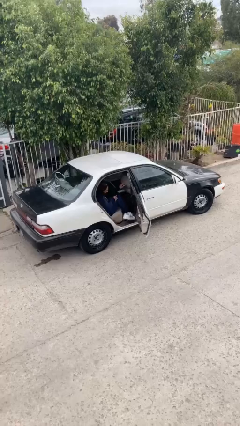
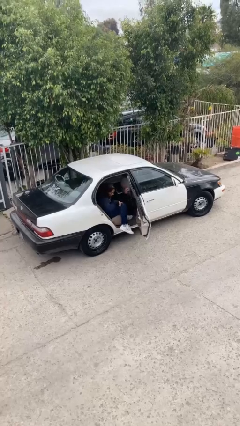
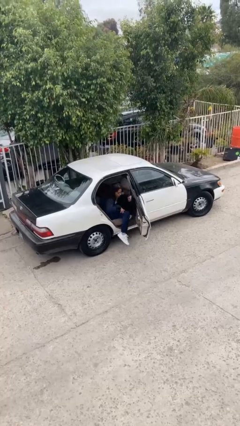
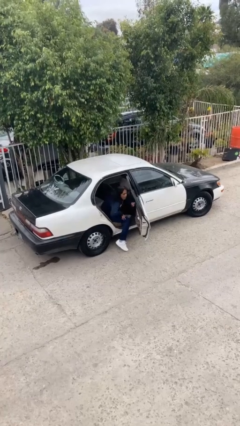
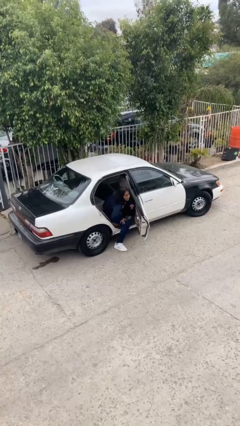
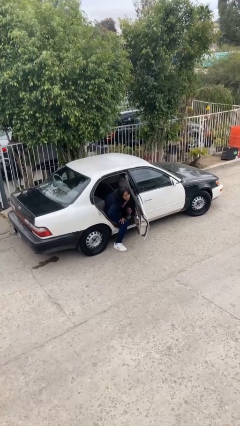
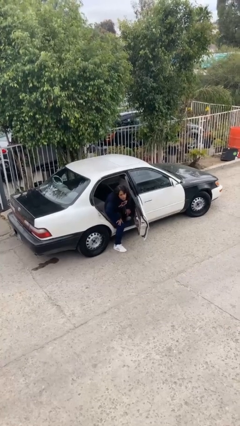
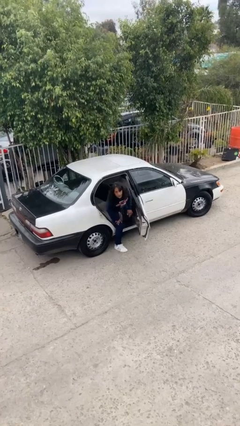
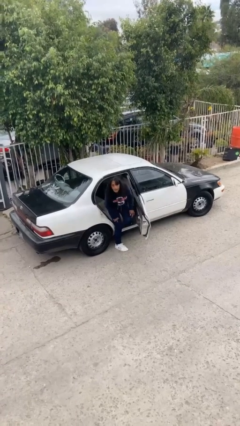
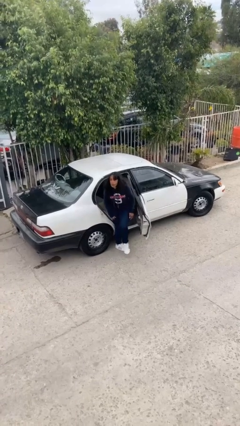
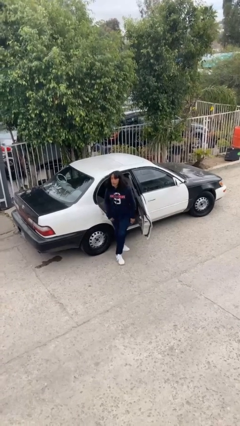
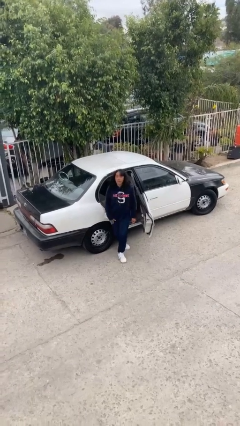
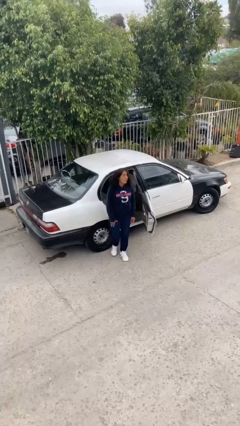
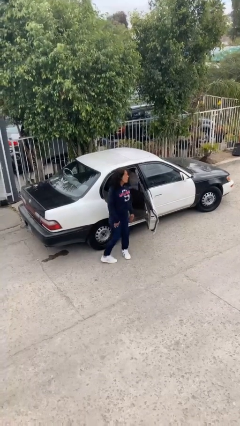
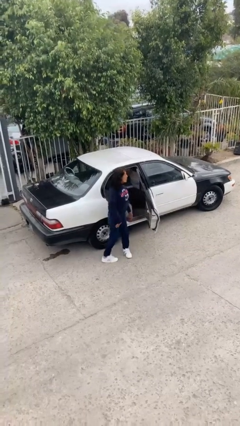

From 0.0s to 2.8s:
person exits car

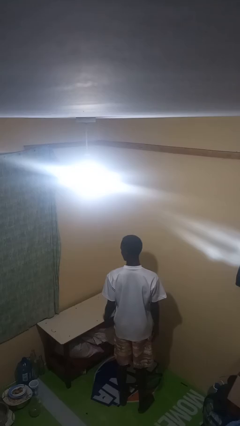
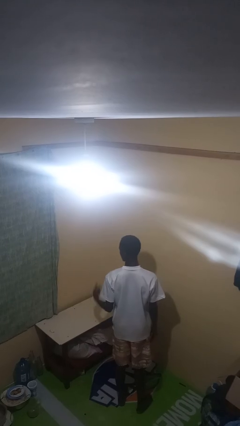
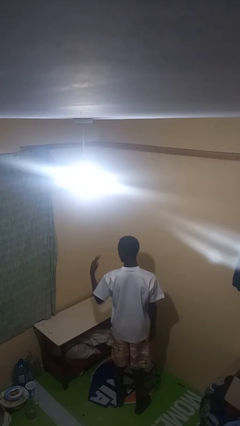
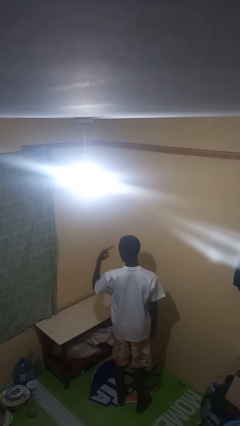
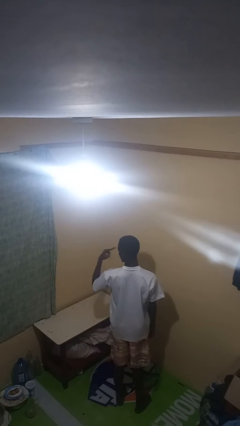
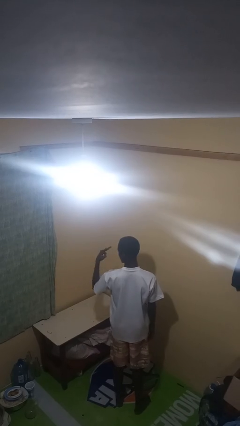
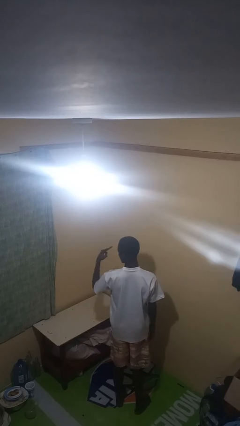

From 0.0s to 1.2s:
person gestures watch closely

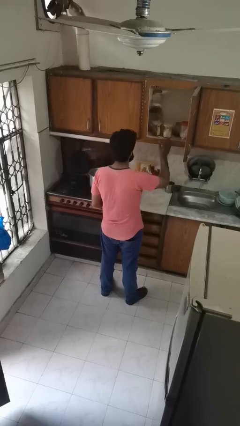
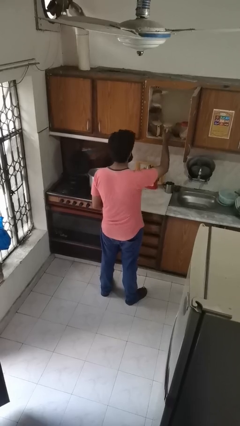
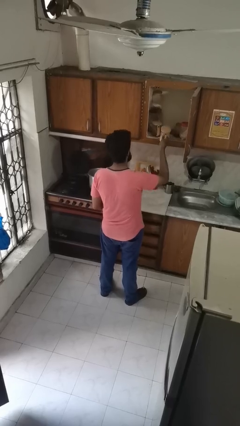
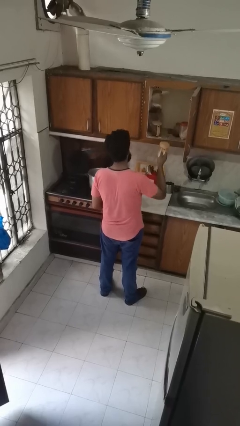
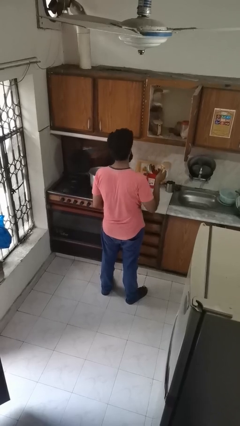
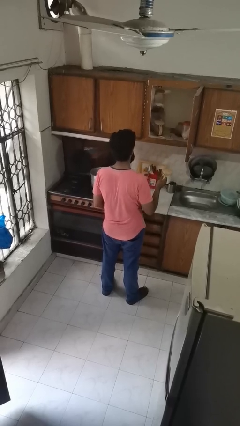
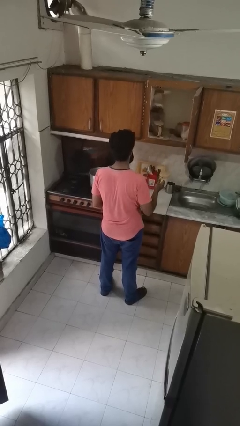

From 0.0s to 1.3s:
person picks up object from cabinet

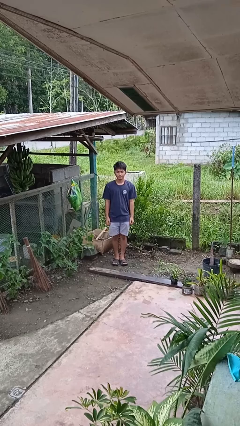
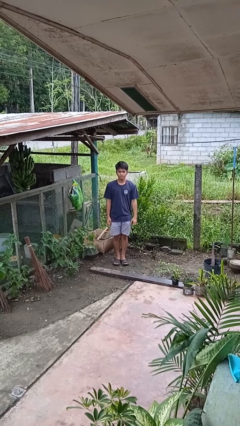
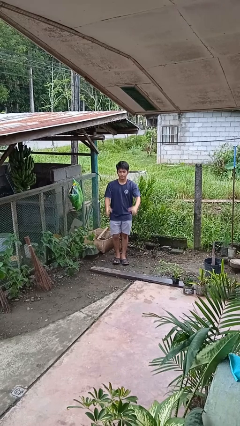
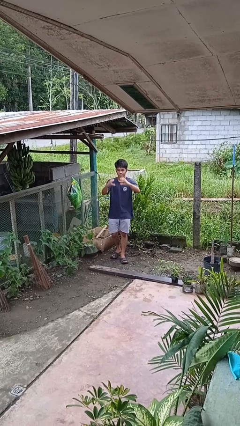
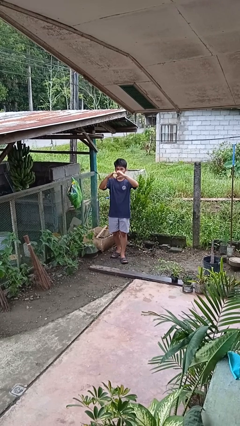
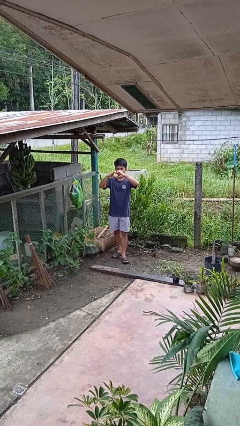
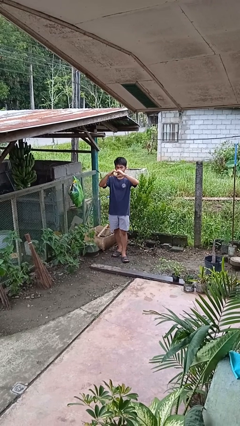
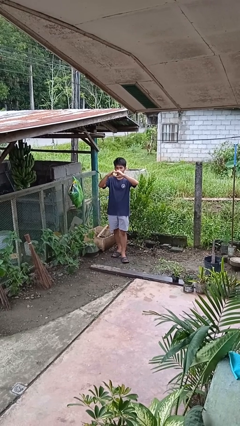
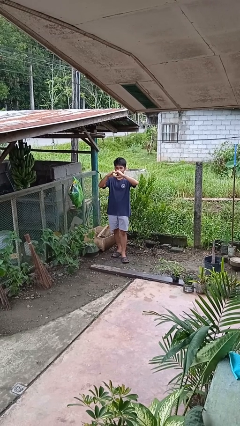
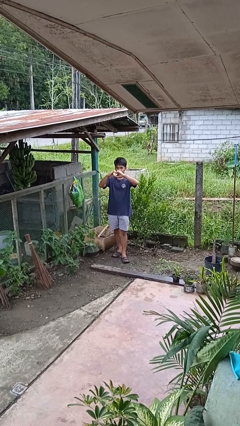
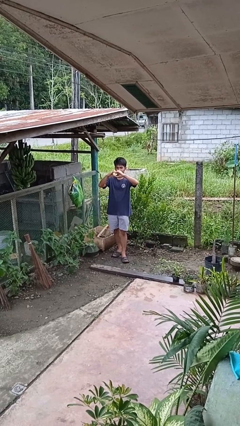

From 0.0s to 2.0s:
person gestures heart

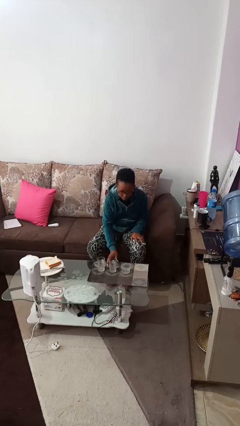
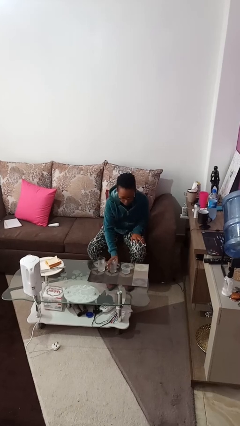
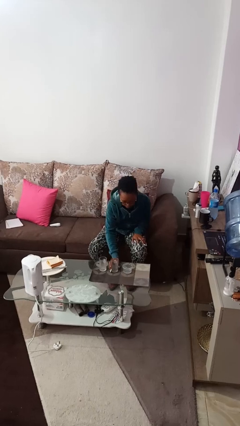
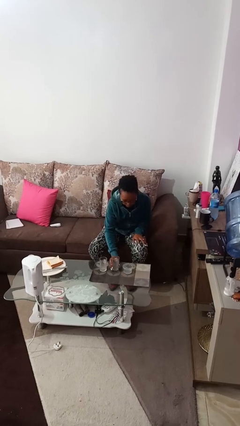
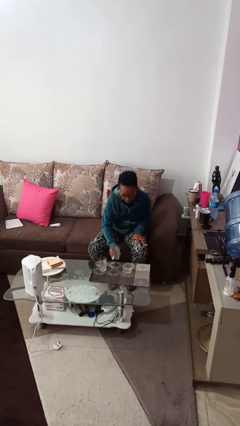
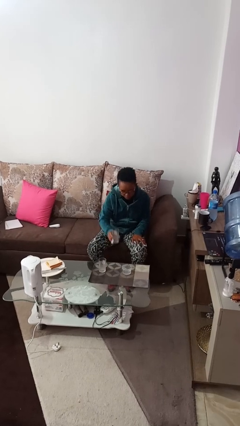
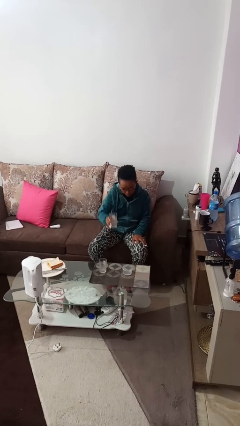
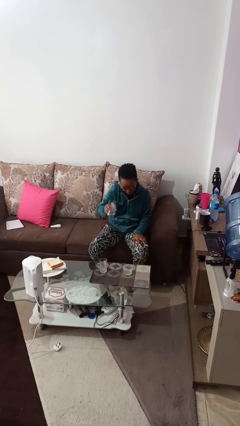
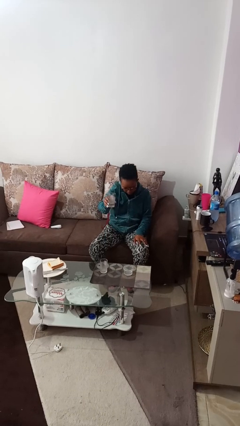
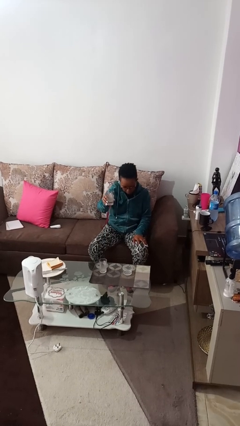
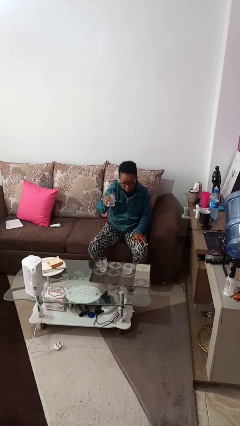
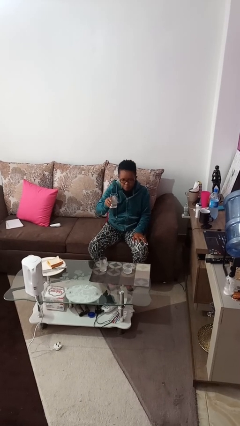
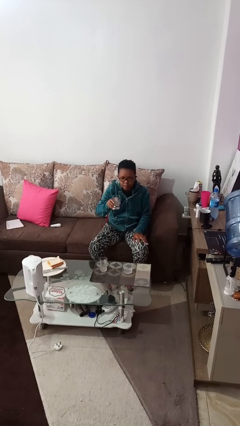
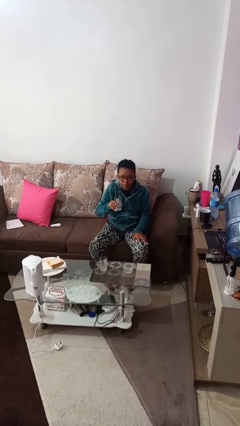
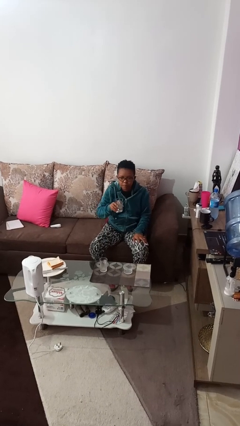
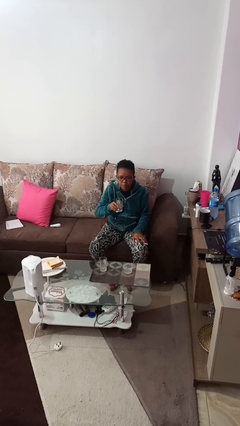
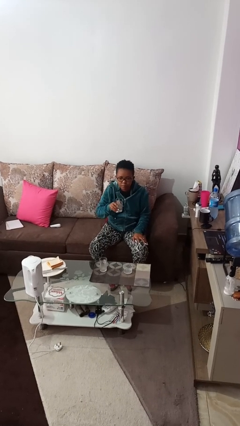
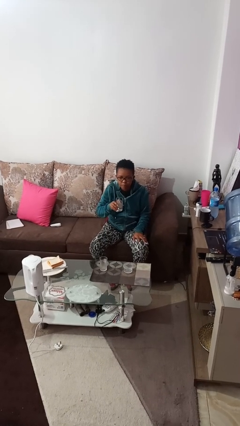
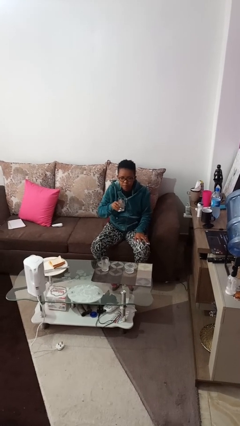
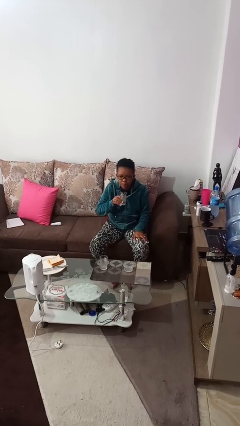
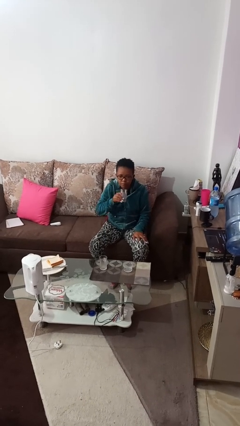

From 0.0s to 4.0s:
person picks up object from table

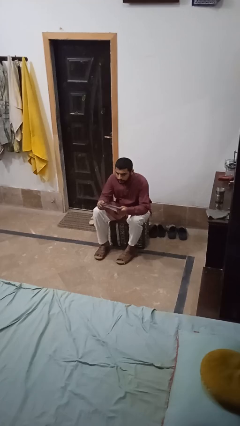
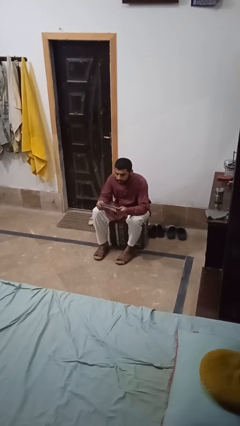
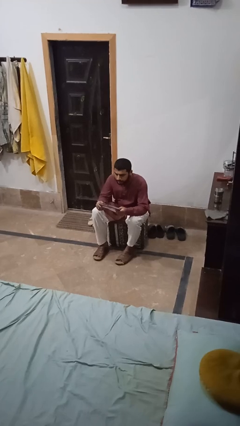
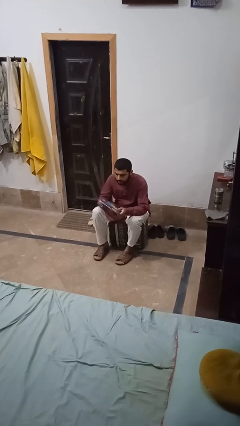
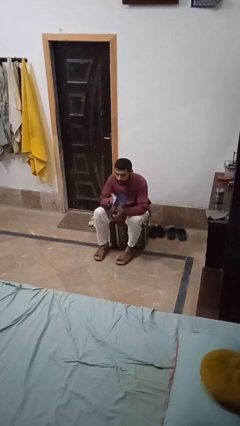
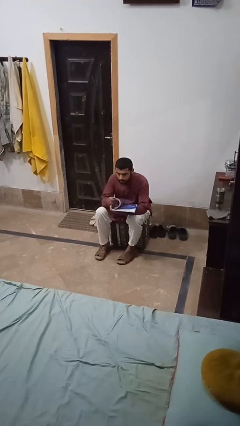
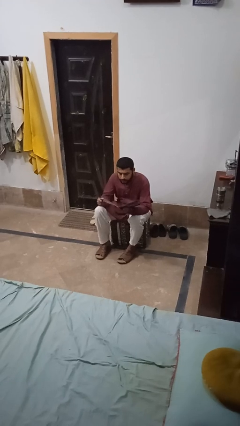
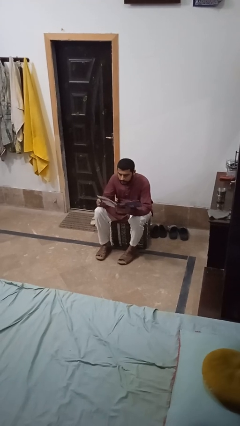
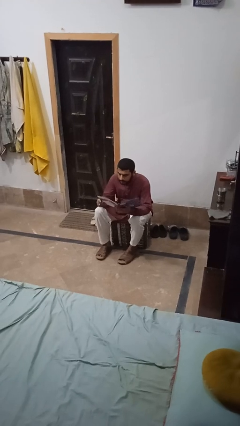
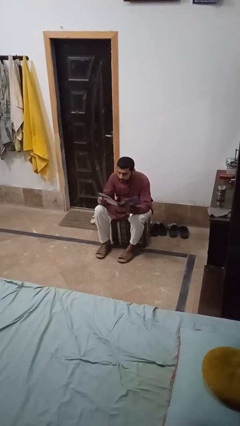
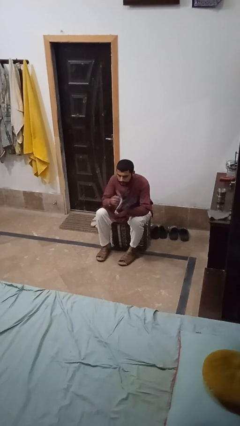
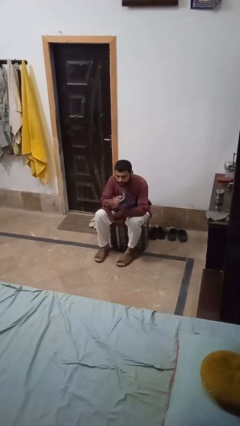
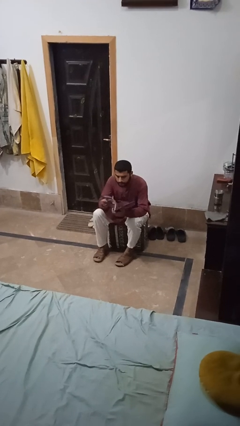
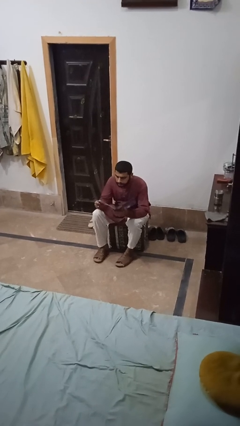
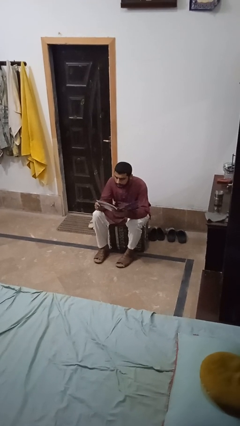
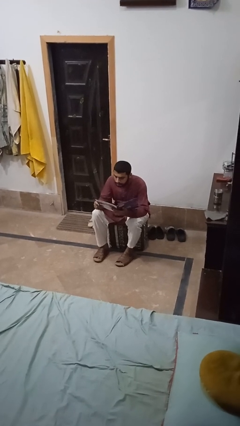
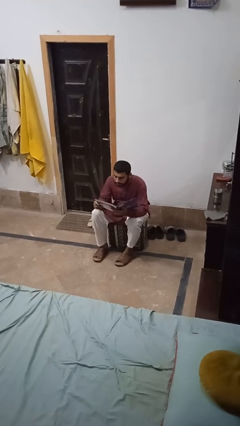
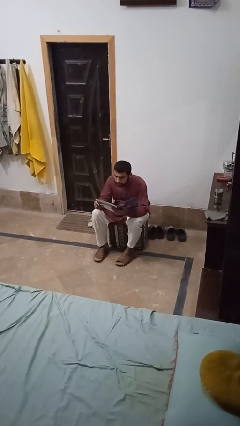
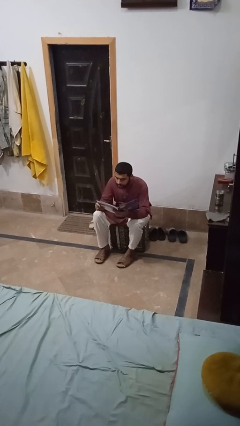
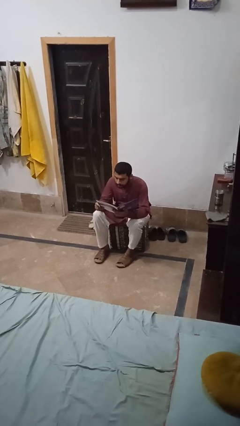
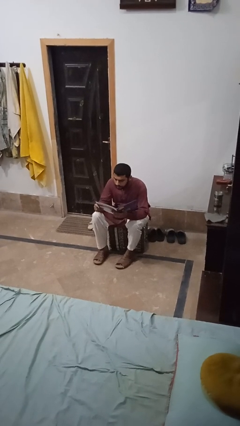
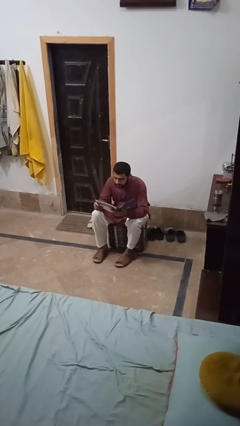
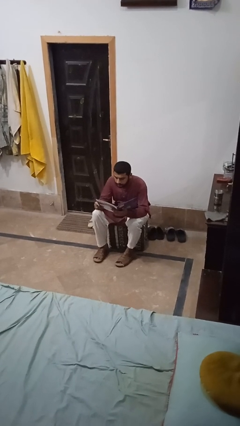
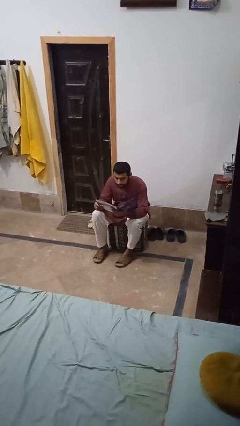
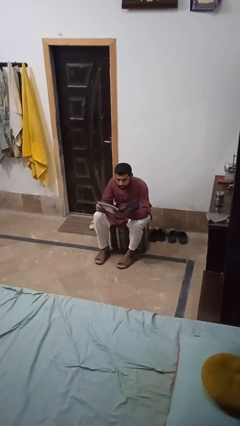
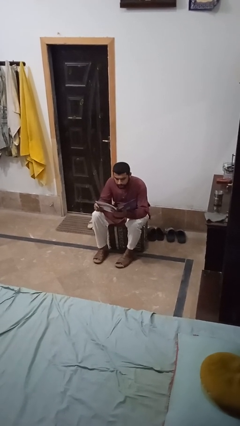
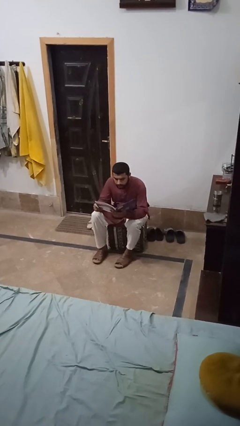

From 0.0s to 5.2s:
person reads magazine

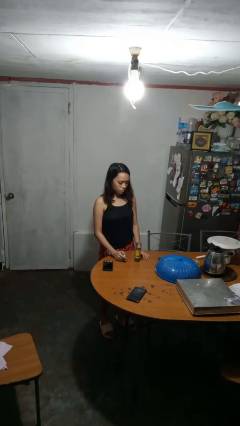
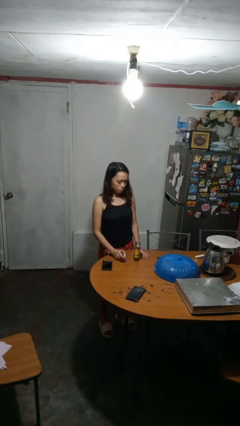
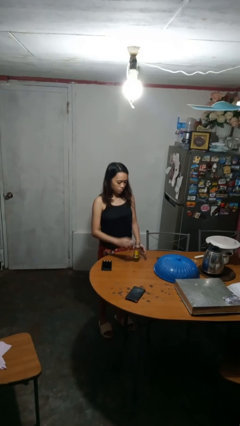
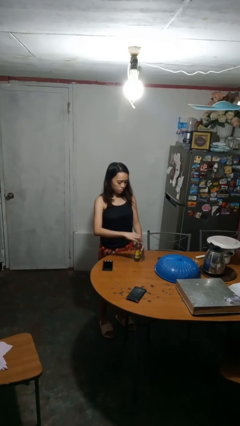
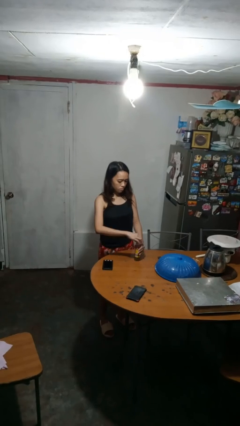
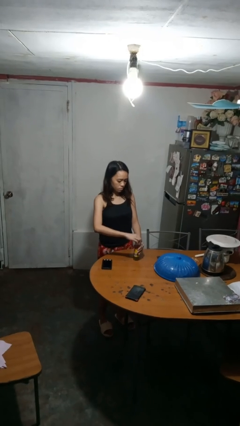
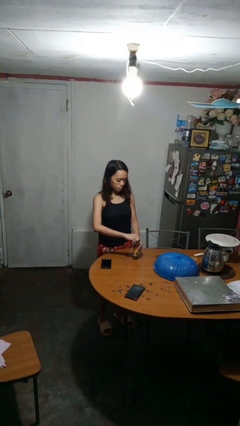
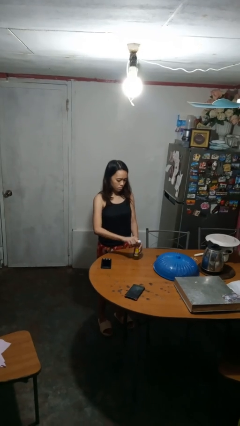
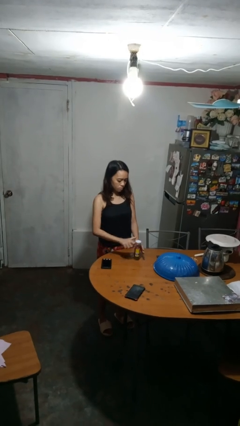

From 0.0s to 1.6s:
person closes jar
